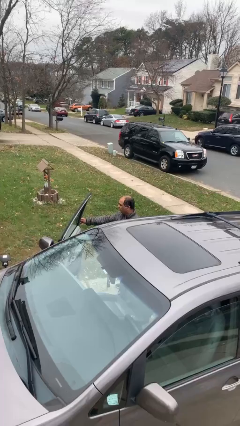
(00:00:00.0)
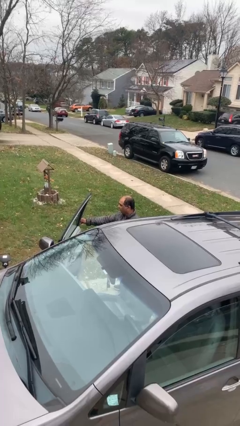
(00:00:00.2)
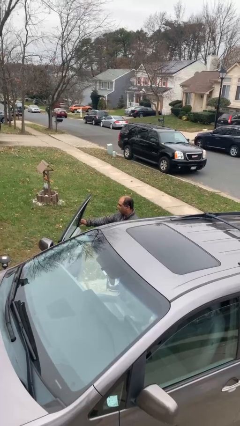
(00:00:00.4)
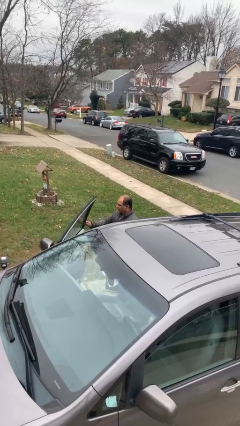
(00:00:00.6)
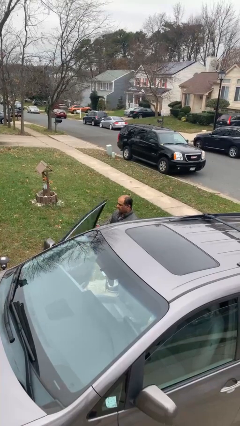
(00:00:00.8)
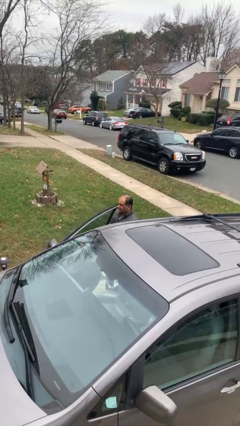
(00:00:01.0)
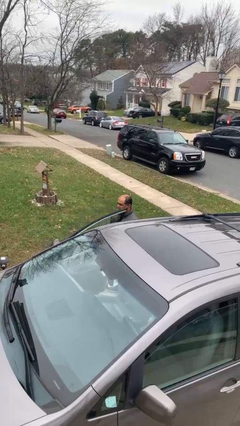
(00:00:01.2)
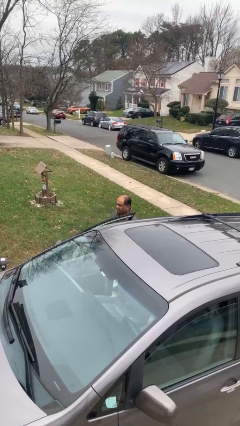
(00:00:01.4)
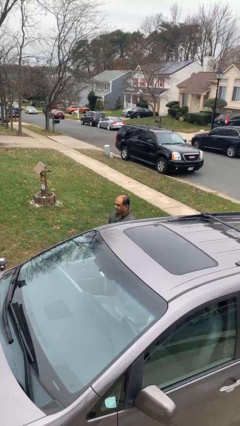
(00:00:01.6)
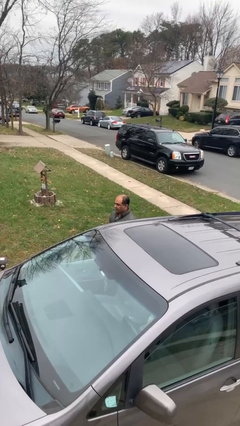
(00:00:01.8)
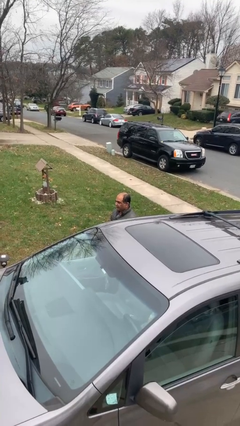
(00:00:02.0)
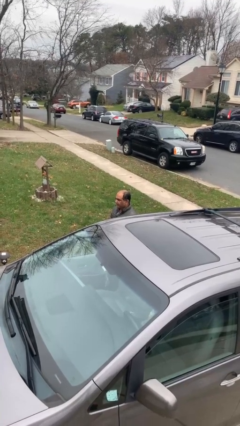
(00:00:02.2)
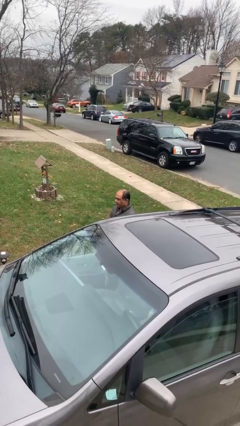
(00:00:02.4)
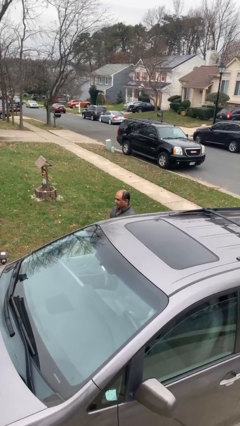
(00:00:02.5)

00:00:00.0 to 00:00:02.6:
person closes car door

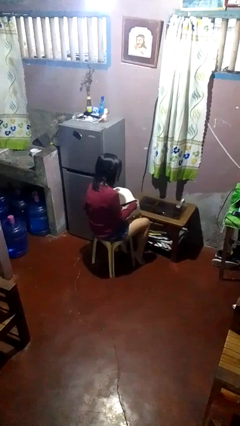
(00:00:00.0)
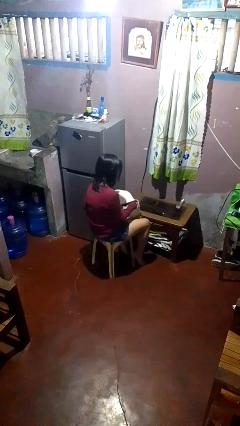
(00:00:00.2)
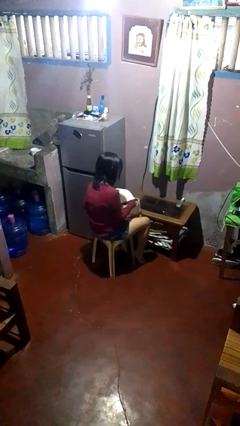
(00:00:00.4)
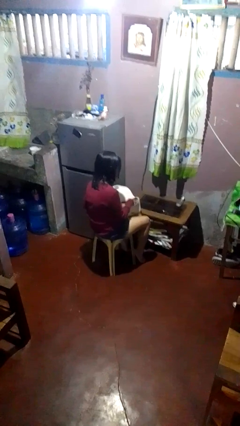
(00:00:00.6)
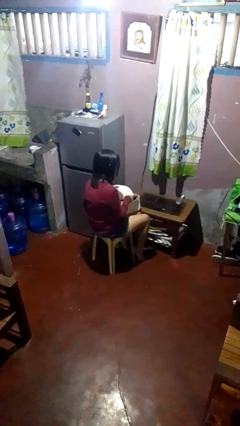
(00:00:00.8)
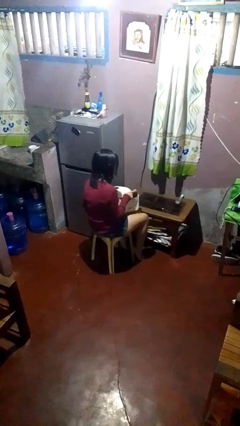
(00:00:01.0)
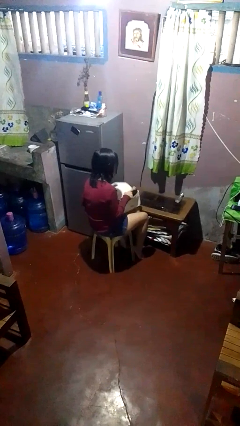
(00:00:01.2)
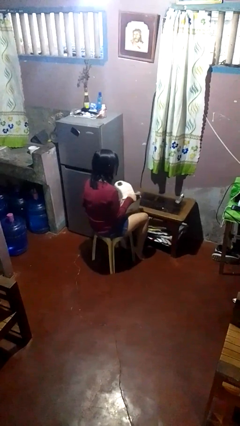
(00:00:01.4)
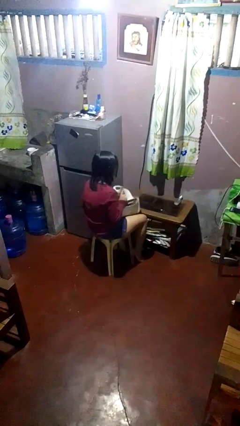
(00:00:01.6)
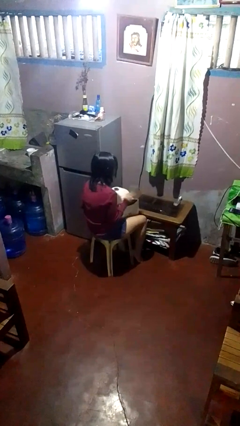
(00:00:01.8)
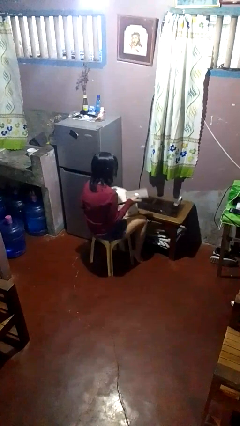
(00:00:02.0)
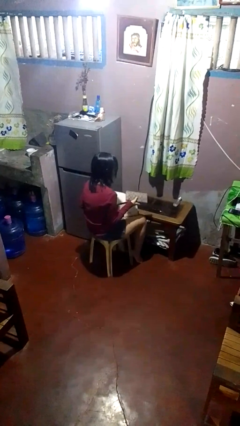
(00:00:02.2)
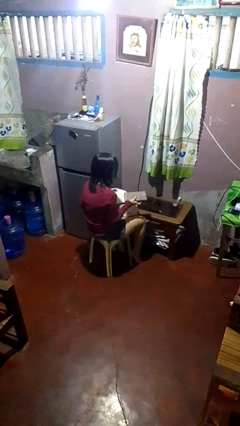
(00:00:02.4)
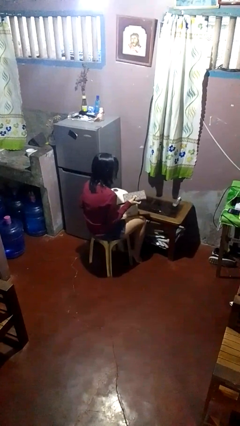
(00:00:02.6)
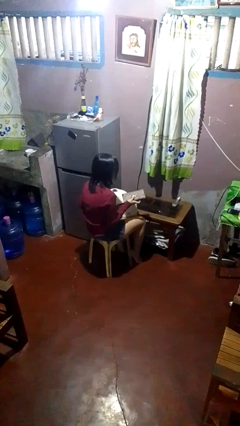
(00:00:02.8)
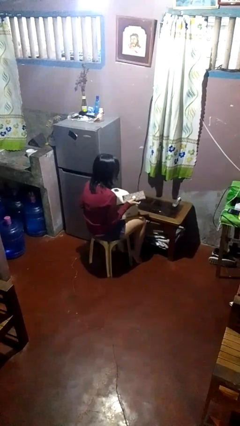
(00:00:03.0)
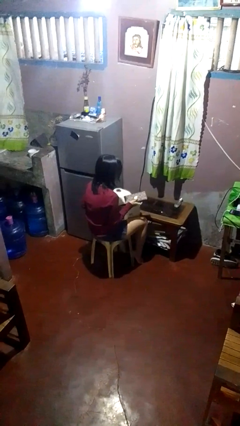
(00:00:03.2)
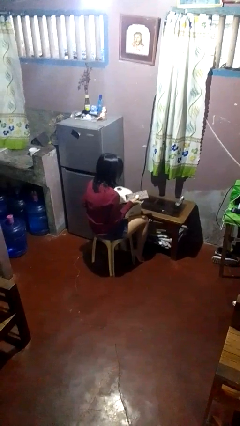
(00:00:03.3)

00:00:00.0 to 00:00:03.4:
person takes object from purse

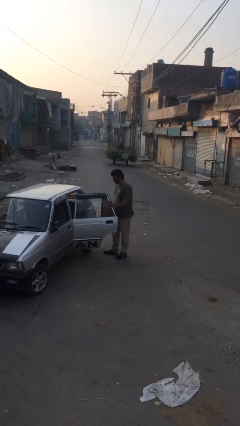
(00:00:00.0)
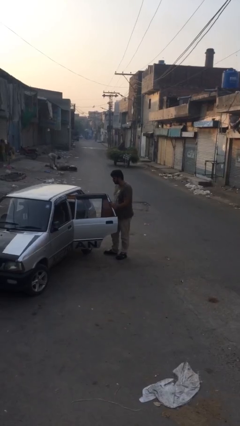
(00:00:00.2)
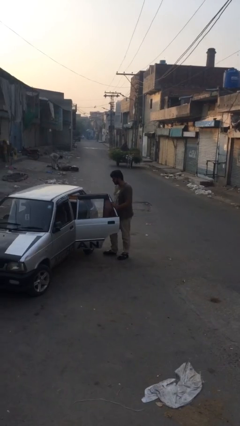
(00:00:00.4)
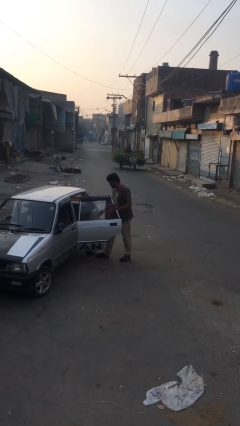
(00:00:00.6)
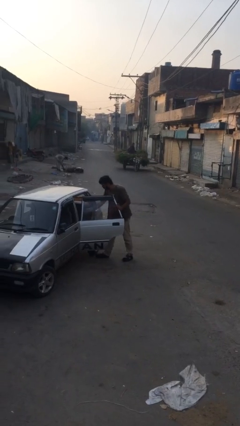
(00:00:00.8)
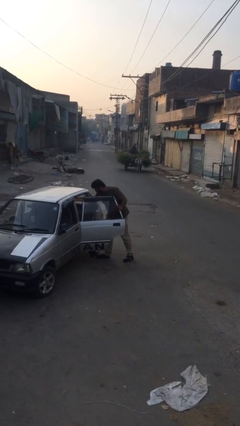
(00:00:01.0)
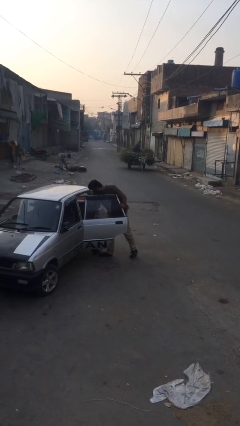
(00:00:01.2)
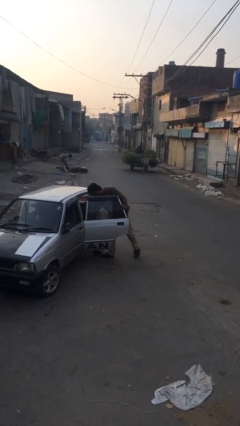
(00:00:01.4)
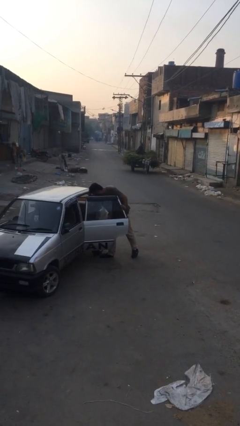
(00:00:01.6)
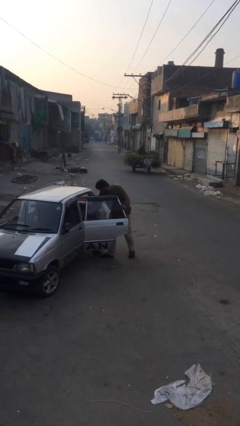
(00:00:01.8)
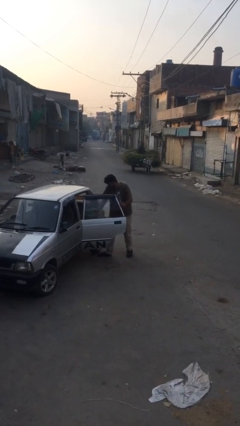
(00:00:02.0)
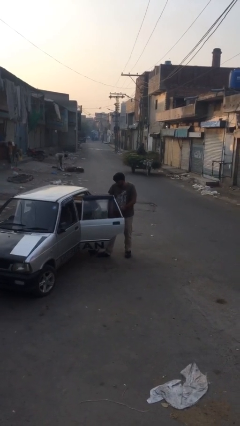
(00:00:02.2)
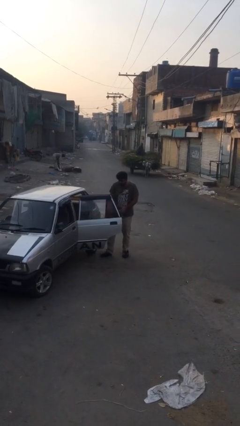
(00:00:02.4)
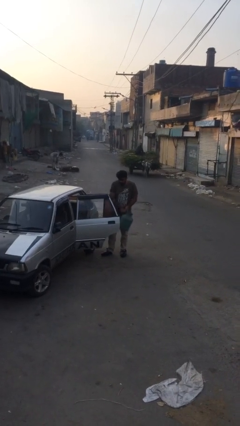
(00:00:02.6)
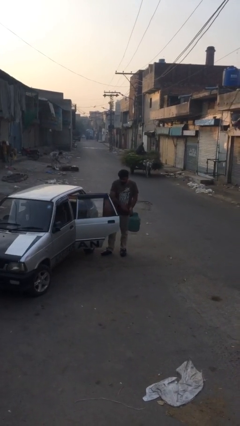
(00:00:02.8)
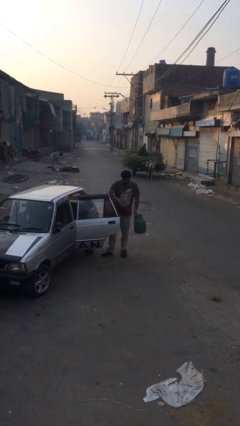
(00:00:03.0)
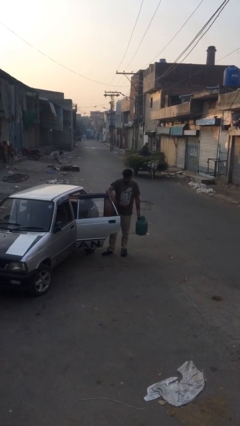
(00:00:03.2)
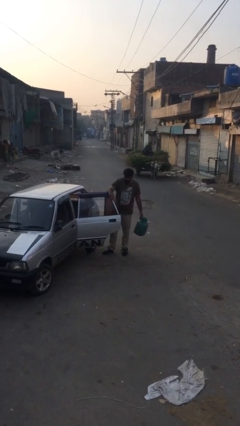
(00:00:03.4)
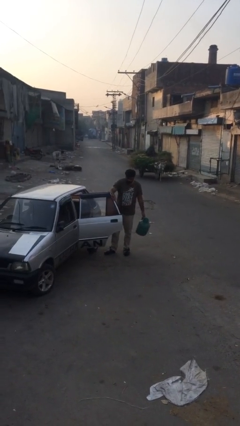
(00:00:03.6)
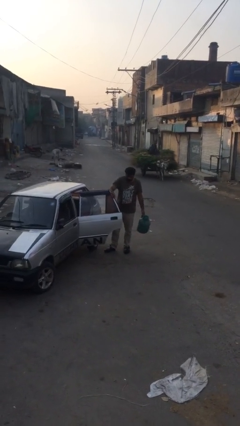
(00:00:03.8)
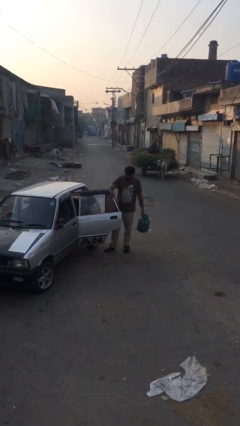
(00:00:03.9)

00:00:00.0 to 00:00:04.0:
person unloads car

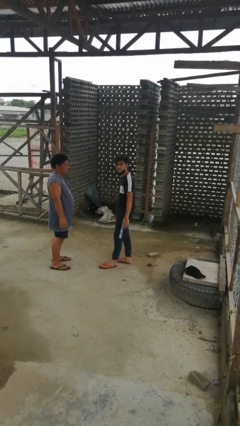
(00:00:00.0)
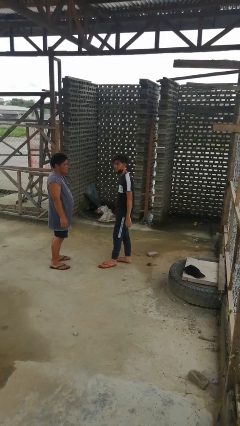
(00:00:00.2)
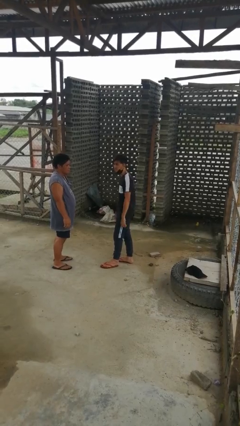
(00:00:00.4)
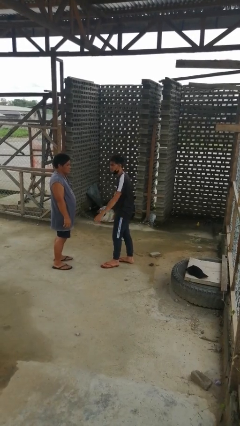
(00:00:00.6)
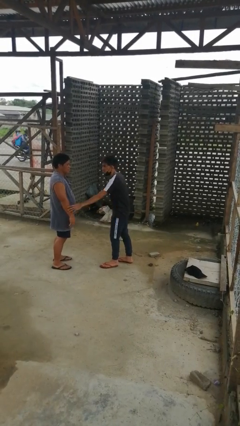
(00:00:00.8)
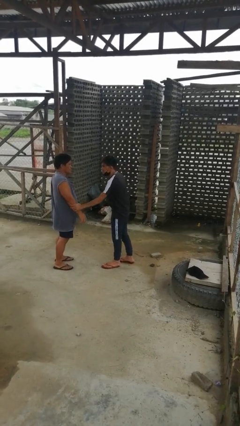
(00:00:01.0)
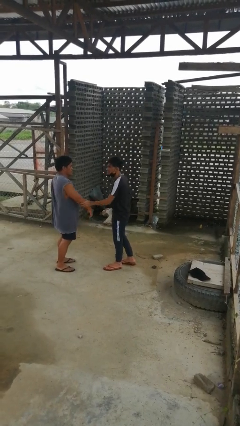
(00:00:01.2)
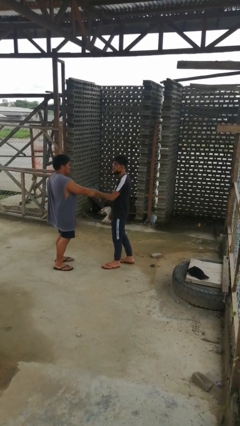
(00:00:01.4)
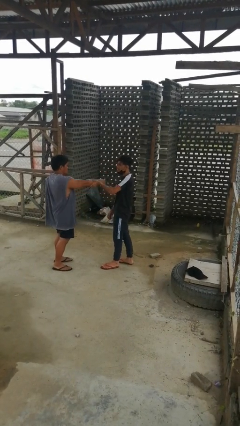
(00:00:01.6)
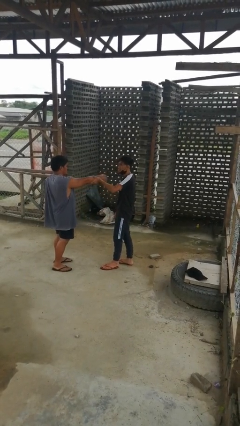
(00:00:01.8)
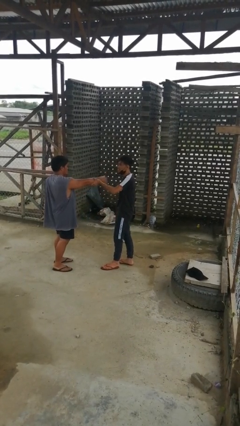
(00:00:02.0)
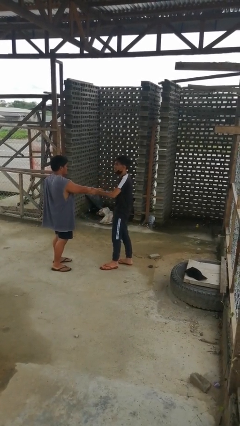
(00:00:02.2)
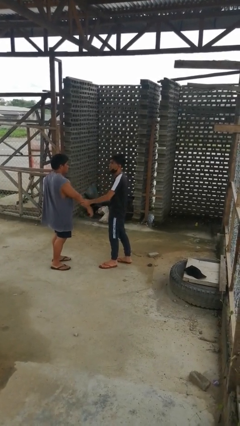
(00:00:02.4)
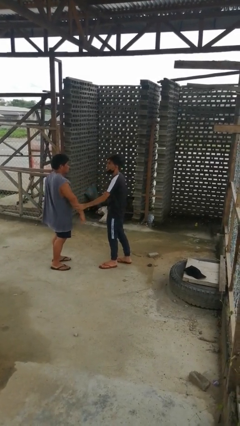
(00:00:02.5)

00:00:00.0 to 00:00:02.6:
person grabs person by forearm

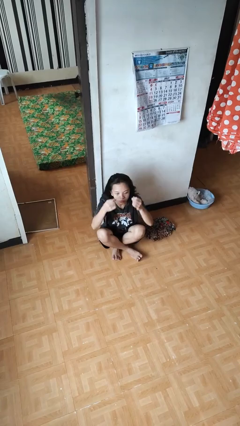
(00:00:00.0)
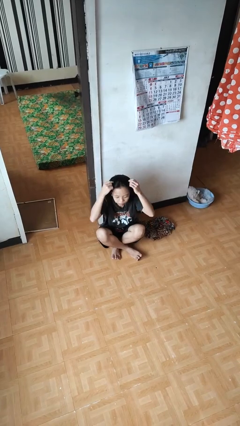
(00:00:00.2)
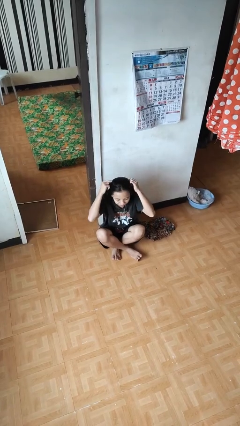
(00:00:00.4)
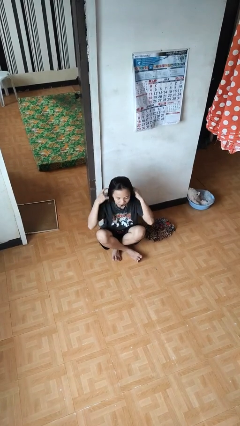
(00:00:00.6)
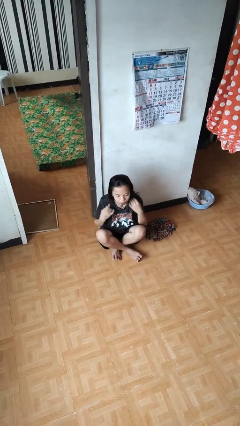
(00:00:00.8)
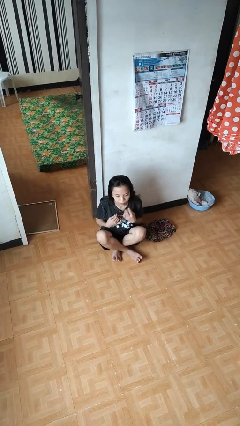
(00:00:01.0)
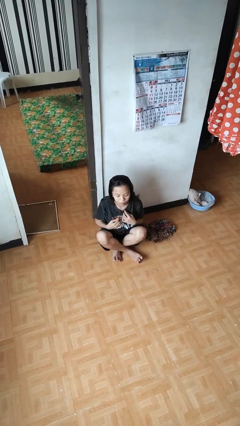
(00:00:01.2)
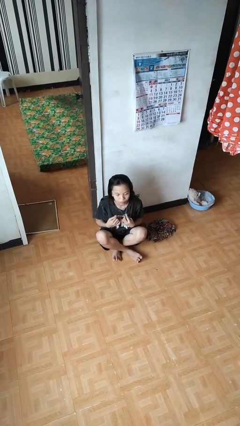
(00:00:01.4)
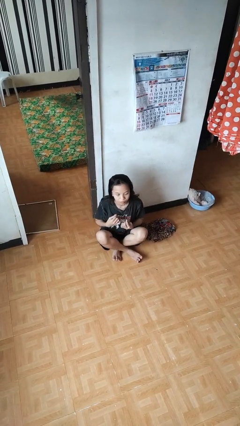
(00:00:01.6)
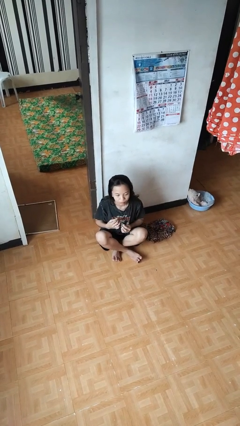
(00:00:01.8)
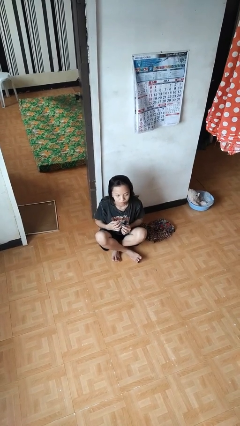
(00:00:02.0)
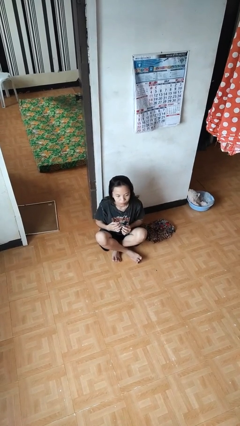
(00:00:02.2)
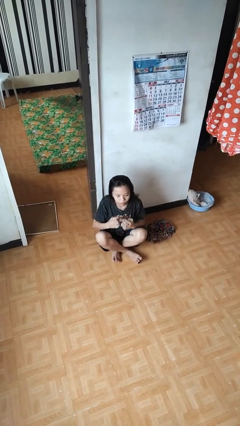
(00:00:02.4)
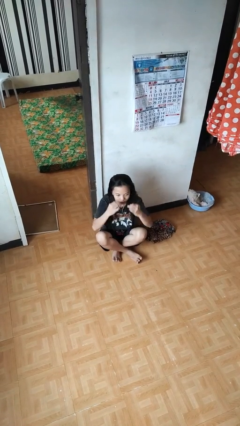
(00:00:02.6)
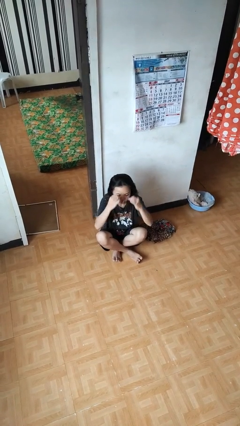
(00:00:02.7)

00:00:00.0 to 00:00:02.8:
person puts on necklace

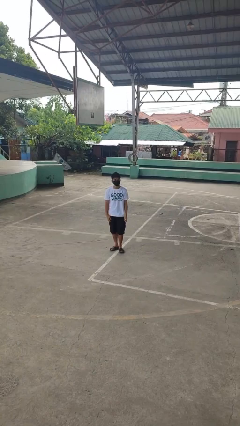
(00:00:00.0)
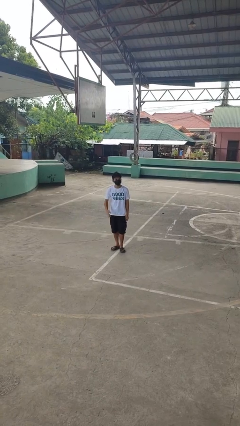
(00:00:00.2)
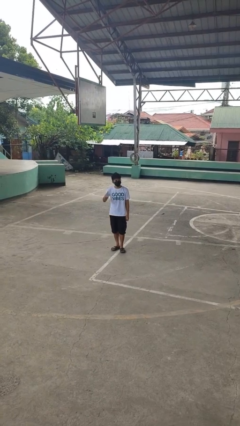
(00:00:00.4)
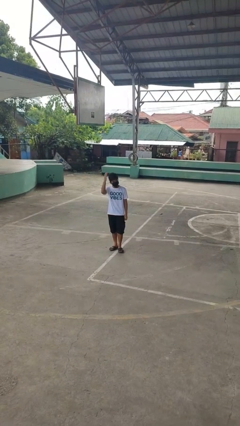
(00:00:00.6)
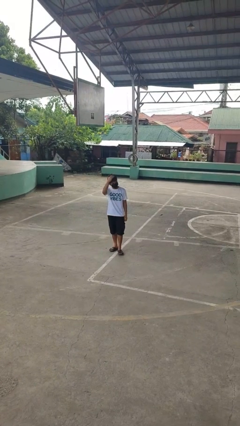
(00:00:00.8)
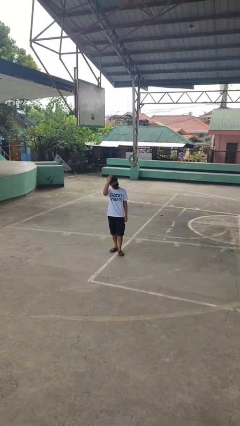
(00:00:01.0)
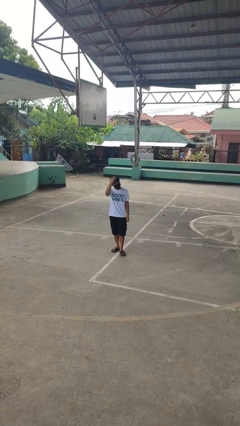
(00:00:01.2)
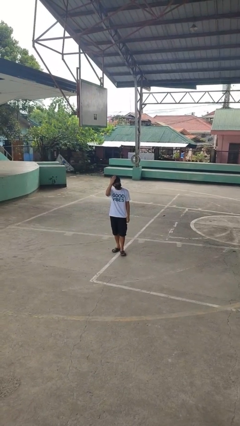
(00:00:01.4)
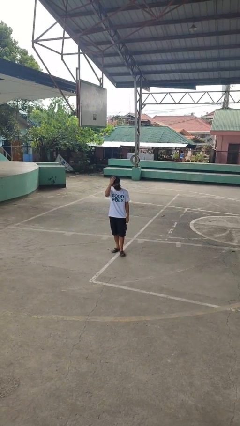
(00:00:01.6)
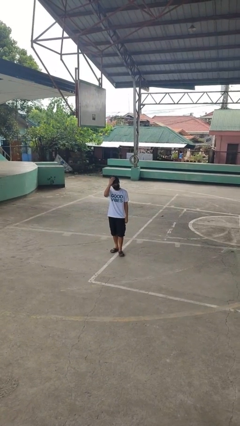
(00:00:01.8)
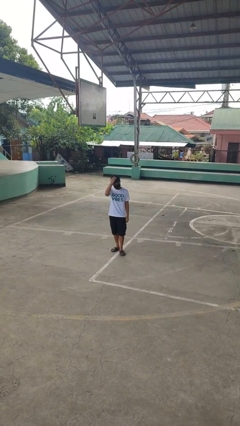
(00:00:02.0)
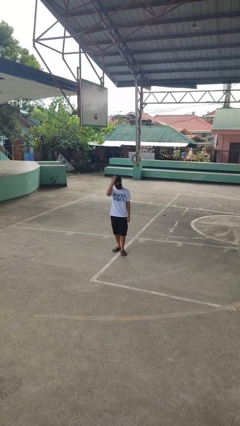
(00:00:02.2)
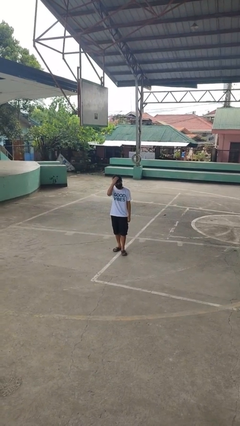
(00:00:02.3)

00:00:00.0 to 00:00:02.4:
person pats head
